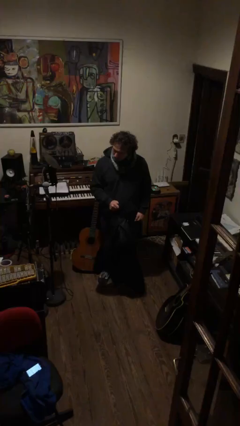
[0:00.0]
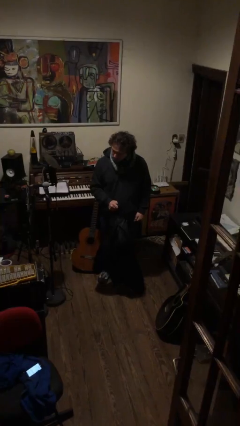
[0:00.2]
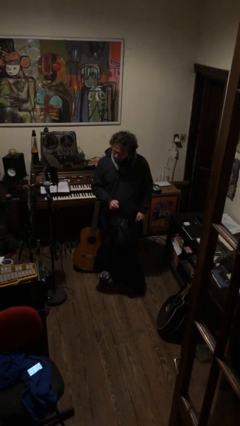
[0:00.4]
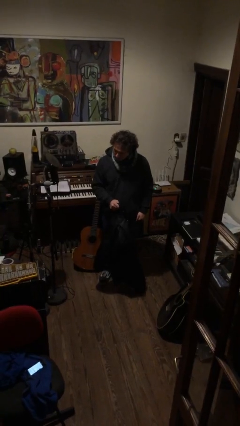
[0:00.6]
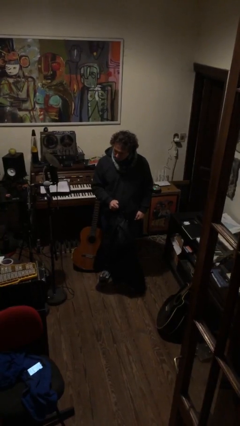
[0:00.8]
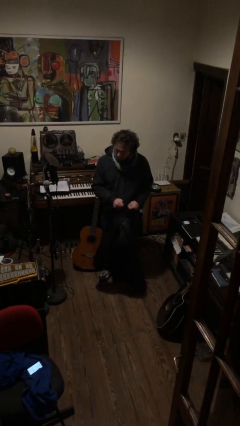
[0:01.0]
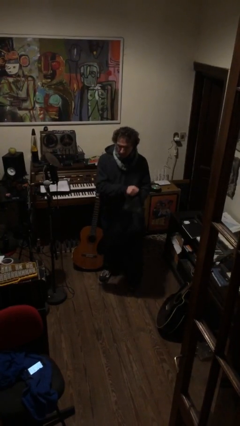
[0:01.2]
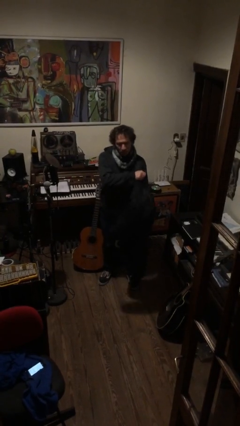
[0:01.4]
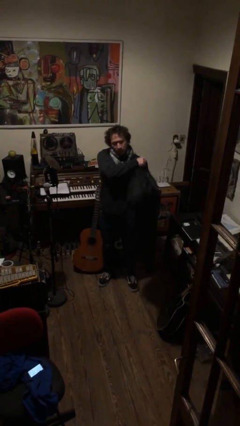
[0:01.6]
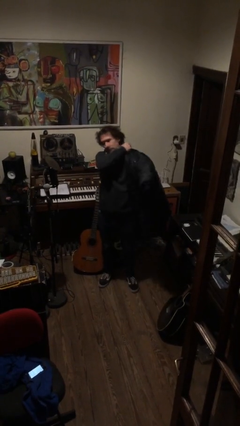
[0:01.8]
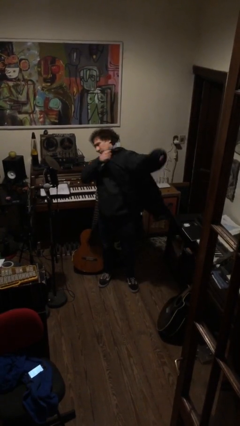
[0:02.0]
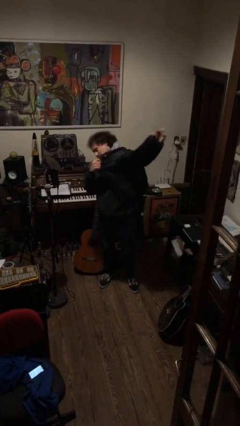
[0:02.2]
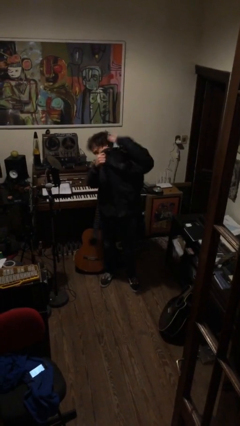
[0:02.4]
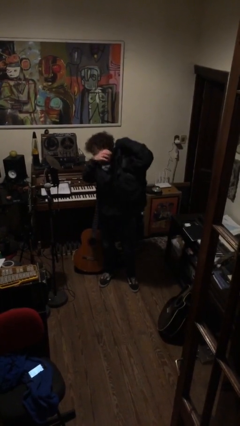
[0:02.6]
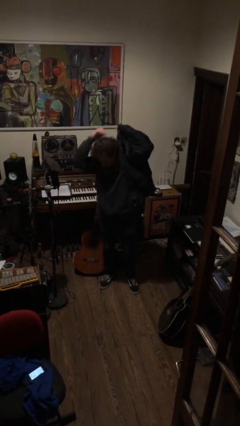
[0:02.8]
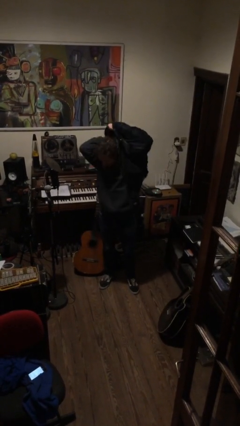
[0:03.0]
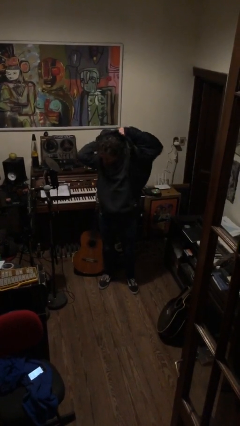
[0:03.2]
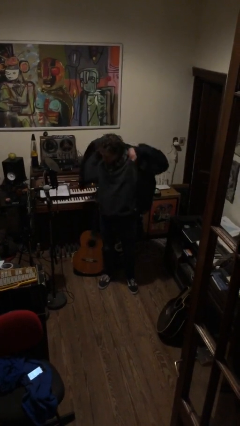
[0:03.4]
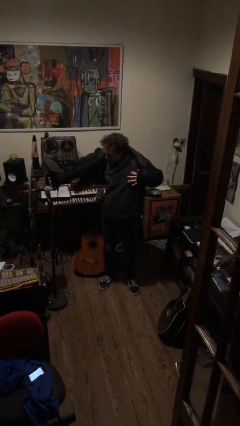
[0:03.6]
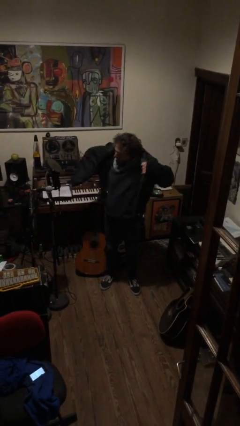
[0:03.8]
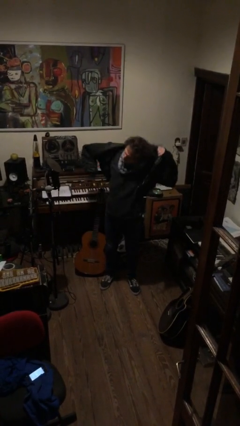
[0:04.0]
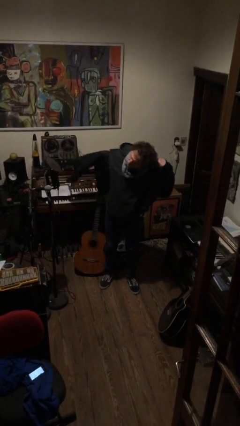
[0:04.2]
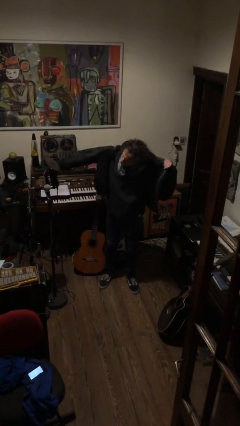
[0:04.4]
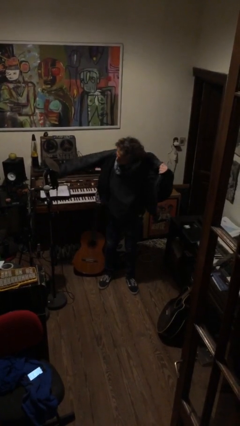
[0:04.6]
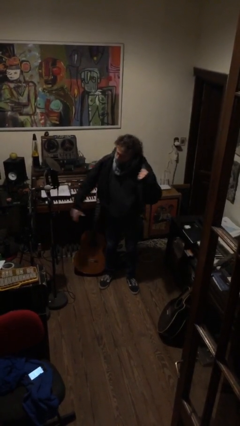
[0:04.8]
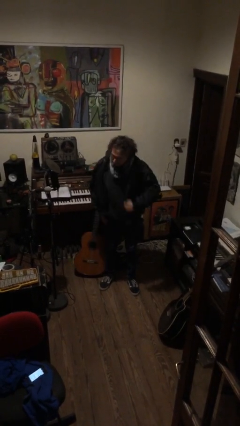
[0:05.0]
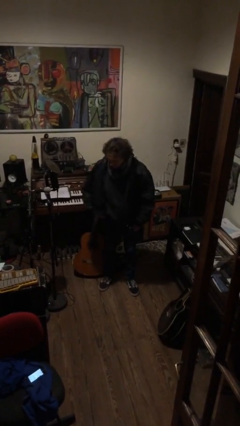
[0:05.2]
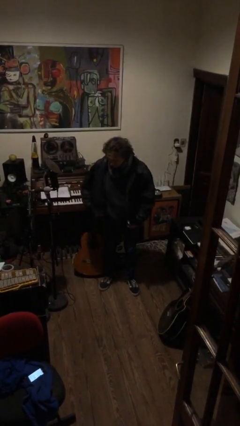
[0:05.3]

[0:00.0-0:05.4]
person puts on jacket

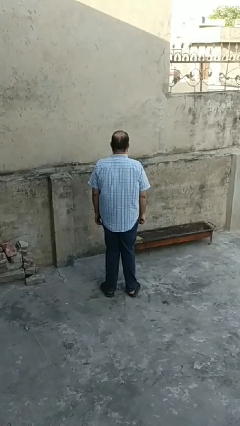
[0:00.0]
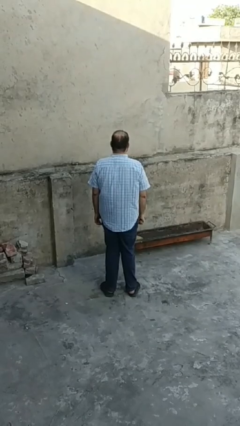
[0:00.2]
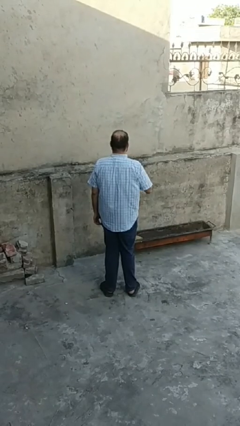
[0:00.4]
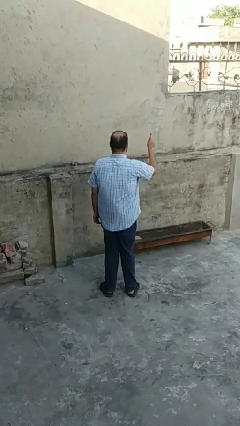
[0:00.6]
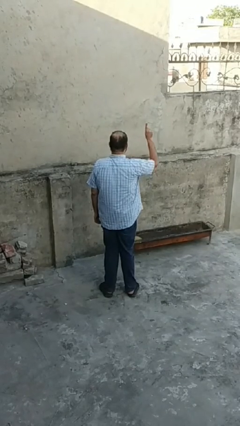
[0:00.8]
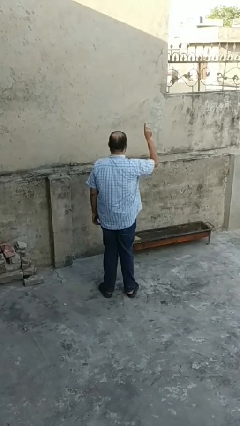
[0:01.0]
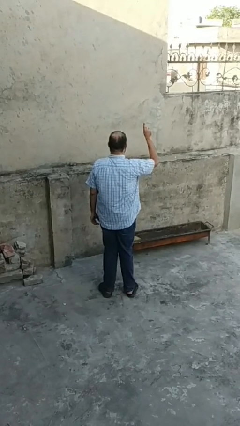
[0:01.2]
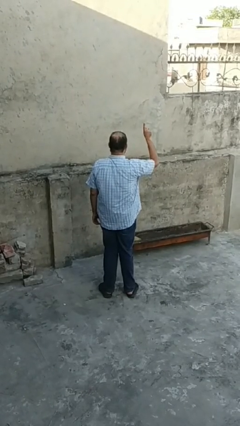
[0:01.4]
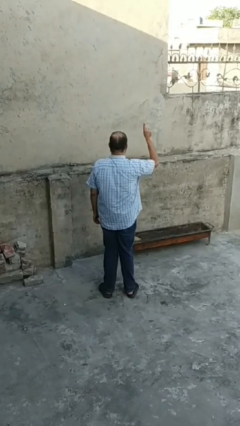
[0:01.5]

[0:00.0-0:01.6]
person gestures number one

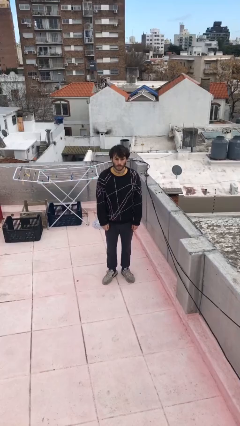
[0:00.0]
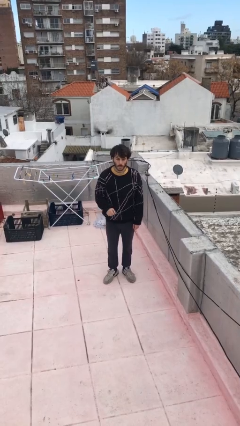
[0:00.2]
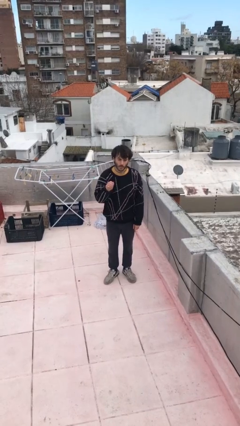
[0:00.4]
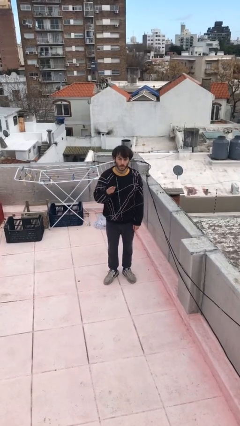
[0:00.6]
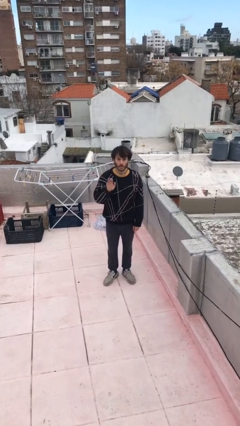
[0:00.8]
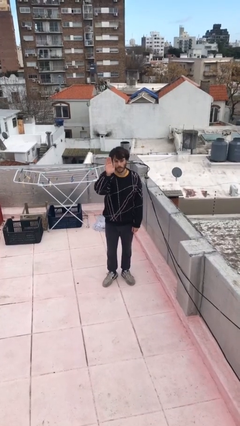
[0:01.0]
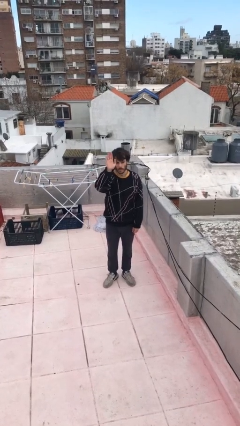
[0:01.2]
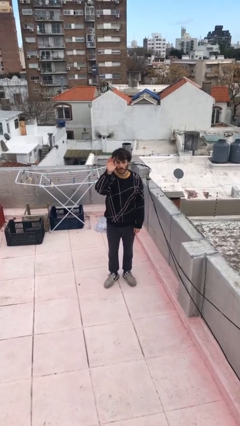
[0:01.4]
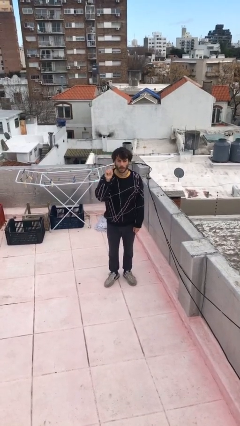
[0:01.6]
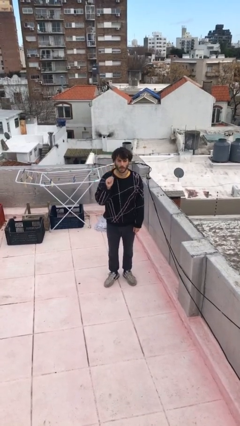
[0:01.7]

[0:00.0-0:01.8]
person gestures swipe up

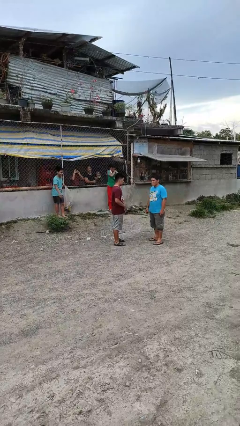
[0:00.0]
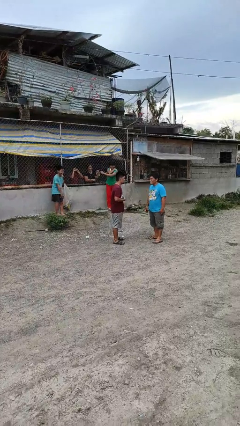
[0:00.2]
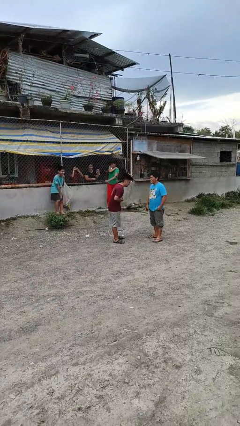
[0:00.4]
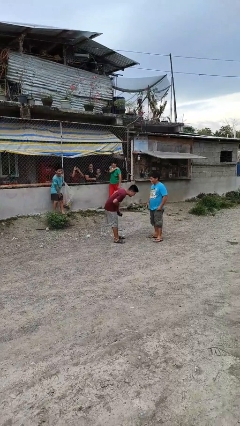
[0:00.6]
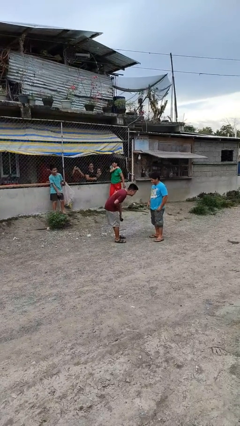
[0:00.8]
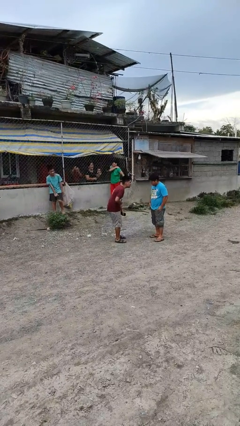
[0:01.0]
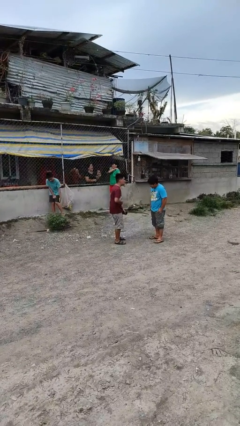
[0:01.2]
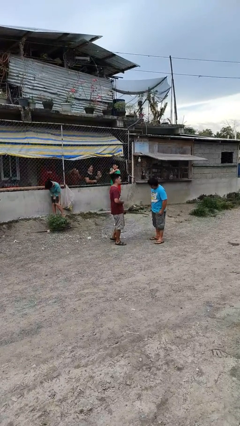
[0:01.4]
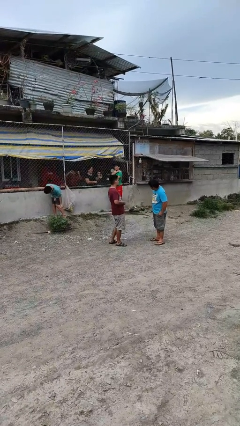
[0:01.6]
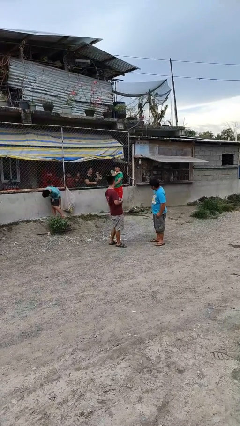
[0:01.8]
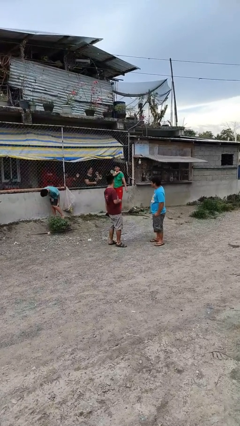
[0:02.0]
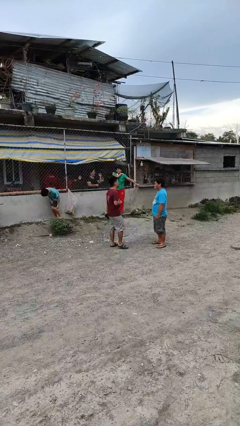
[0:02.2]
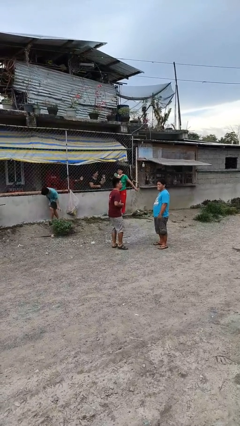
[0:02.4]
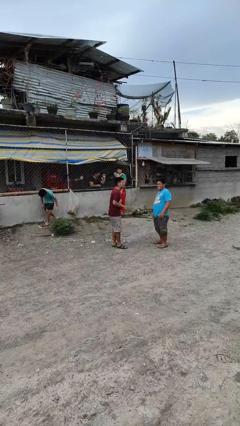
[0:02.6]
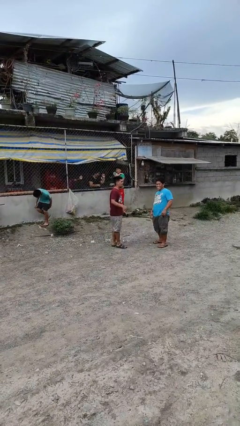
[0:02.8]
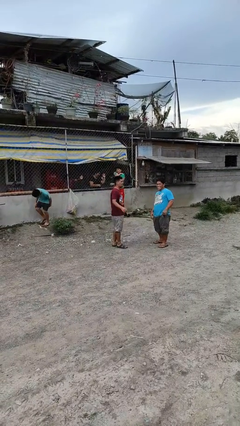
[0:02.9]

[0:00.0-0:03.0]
person laughs with person

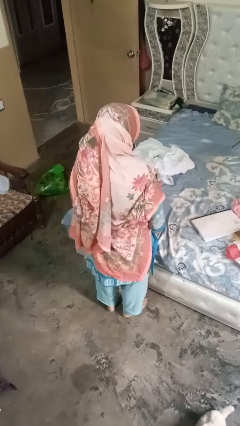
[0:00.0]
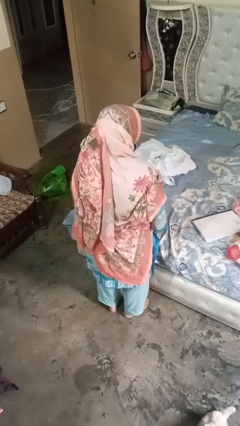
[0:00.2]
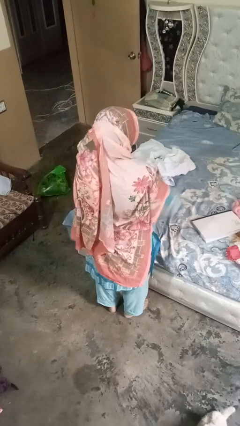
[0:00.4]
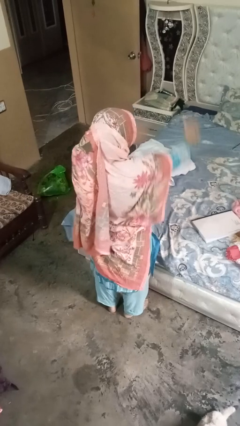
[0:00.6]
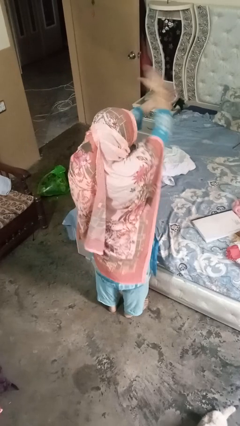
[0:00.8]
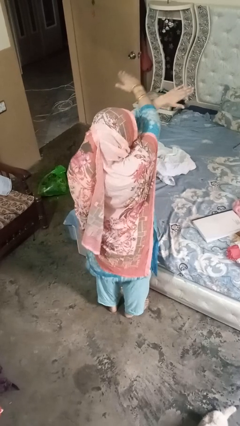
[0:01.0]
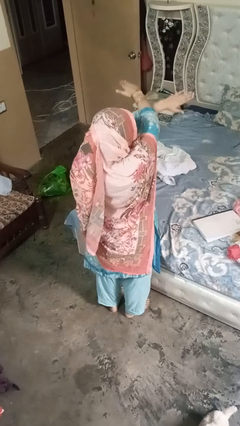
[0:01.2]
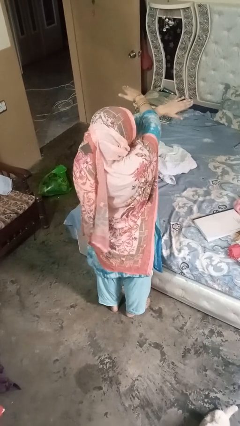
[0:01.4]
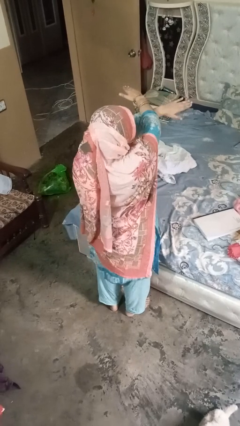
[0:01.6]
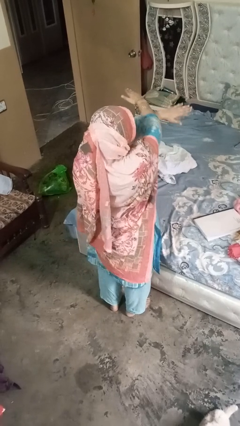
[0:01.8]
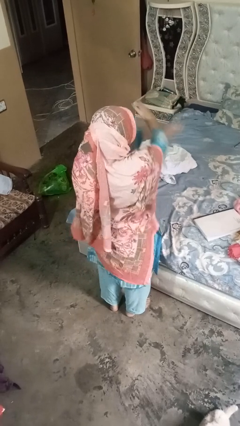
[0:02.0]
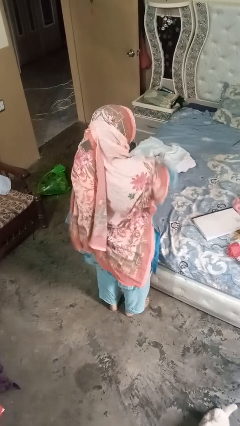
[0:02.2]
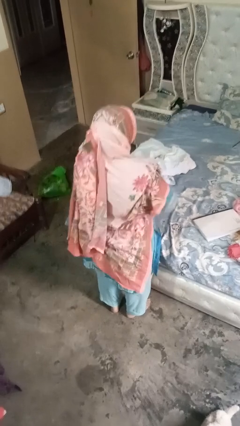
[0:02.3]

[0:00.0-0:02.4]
person gestures arms x

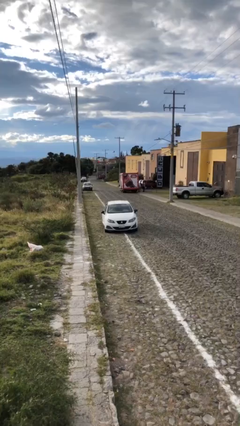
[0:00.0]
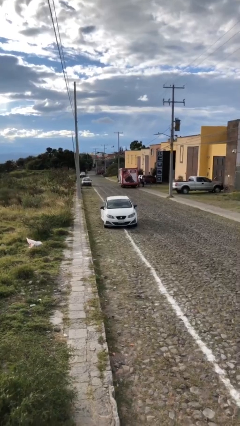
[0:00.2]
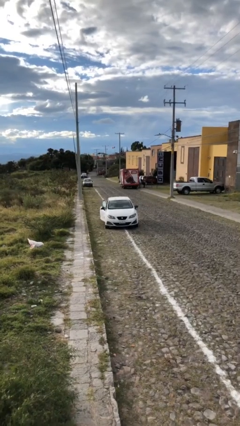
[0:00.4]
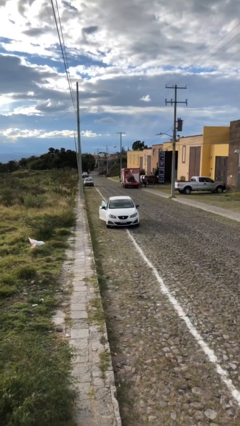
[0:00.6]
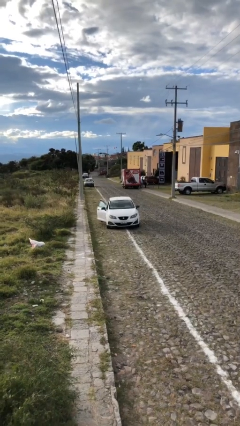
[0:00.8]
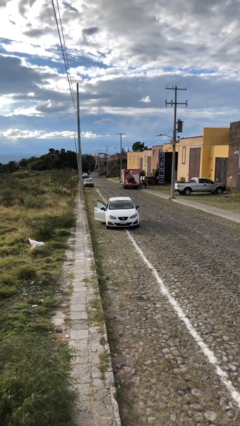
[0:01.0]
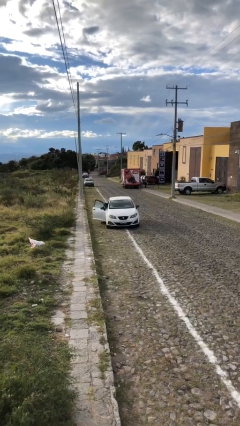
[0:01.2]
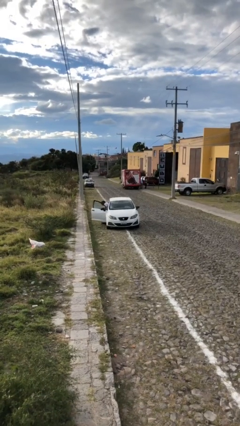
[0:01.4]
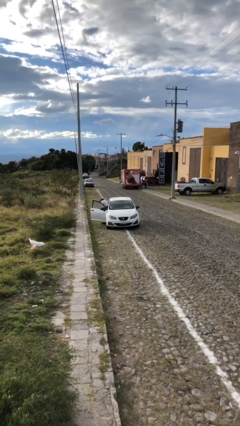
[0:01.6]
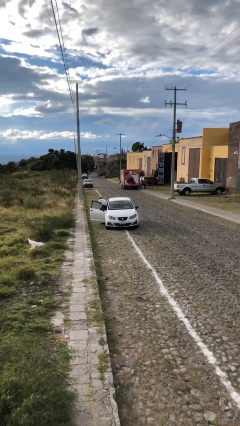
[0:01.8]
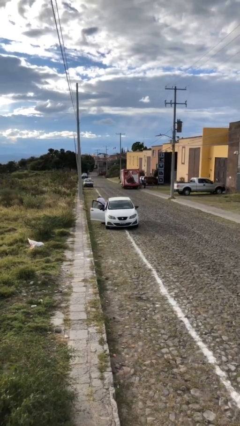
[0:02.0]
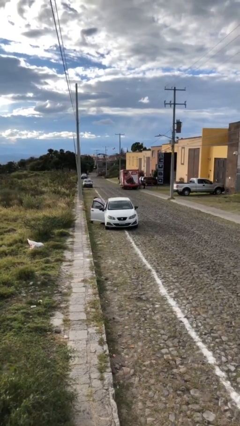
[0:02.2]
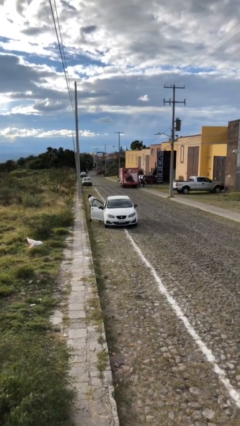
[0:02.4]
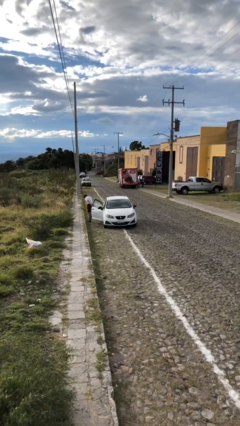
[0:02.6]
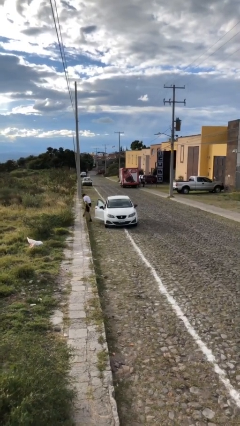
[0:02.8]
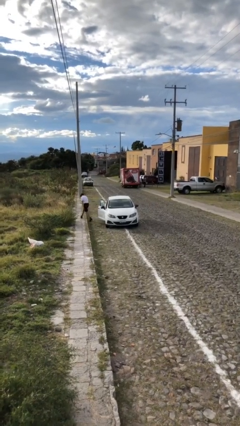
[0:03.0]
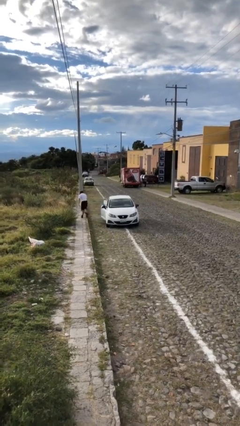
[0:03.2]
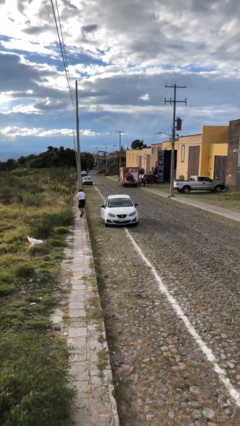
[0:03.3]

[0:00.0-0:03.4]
car drops off person
